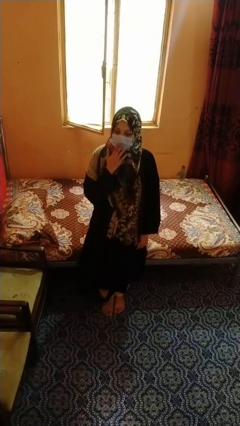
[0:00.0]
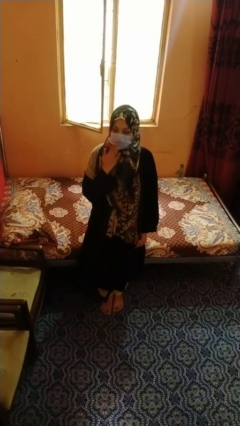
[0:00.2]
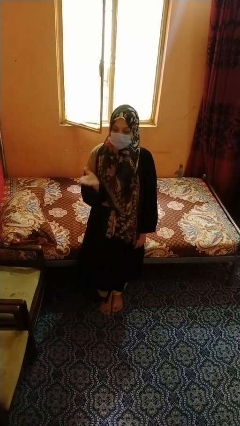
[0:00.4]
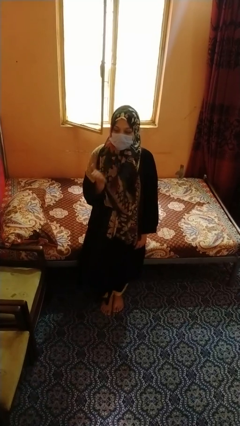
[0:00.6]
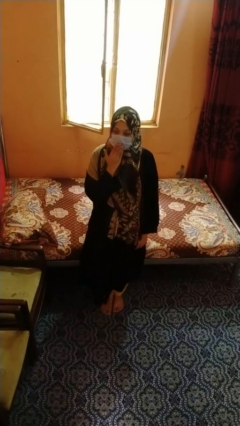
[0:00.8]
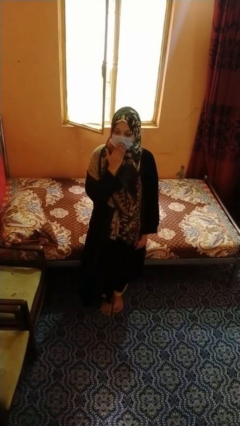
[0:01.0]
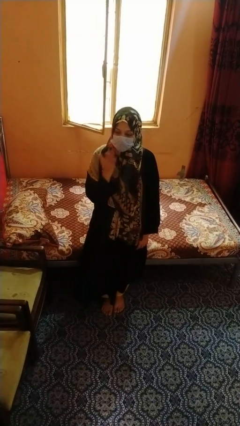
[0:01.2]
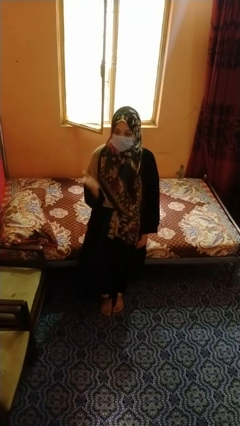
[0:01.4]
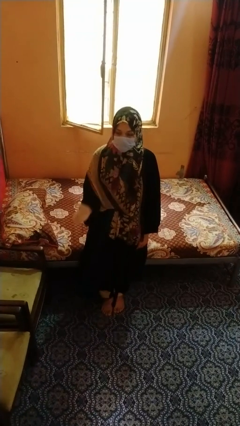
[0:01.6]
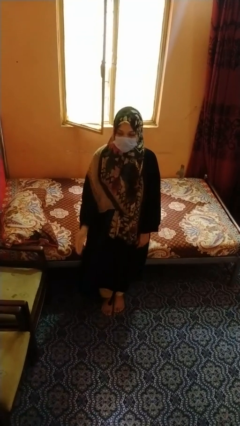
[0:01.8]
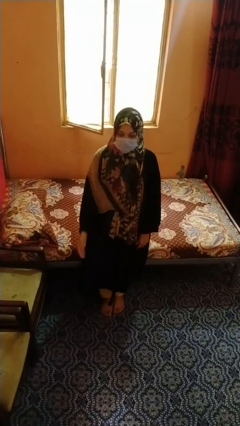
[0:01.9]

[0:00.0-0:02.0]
person gestures blow kiss

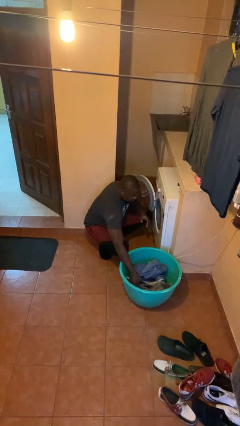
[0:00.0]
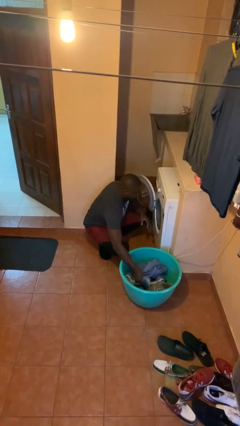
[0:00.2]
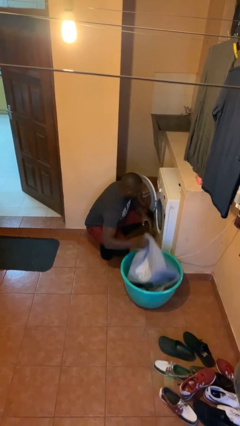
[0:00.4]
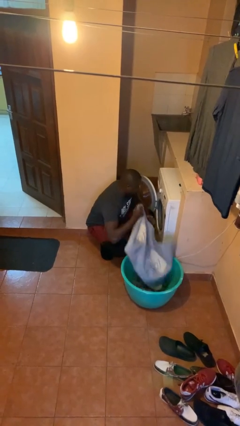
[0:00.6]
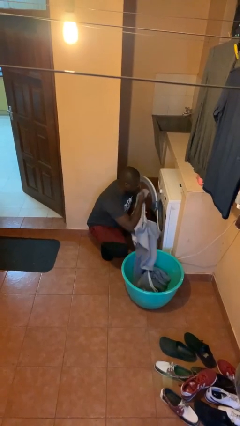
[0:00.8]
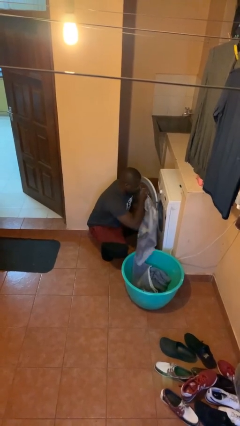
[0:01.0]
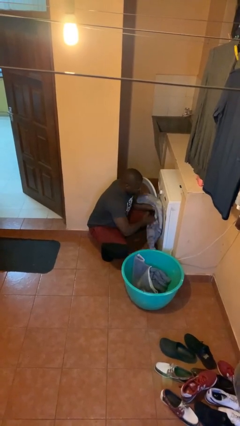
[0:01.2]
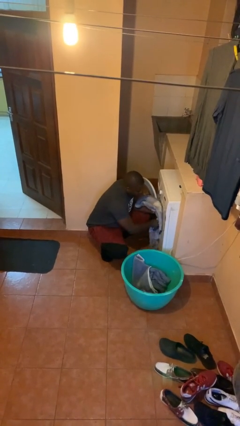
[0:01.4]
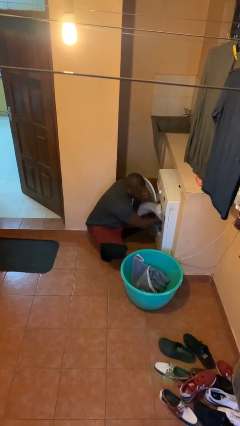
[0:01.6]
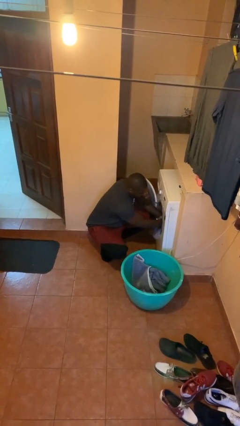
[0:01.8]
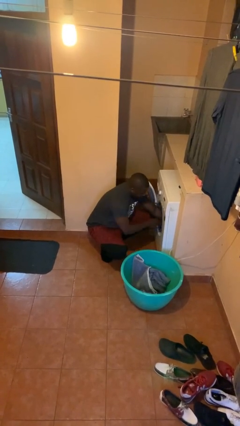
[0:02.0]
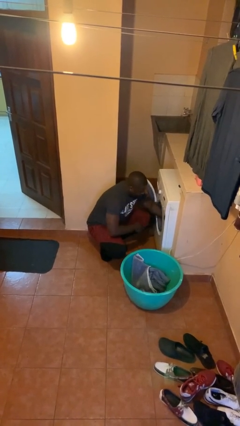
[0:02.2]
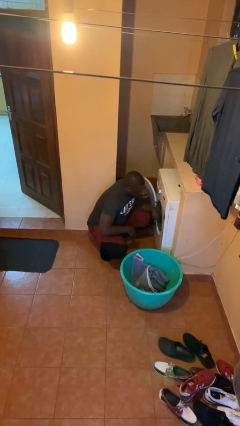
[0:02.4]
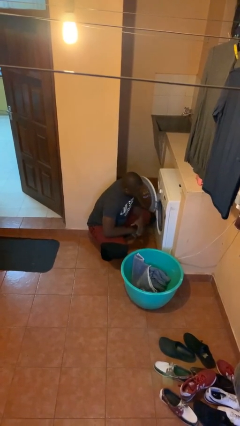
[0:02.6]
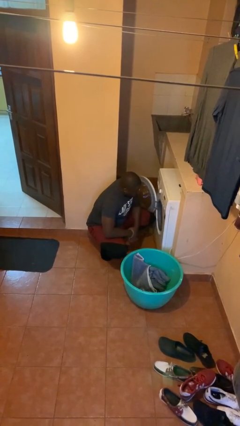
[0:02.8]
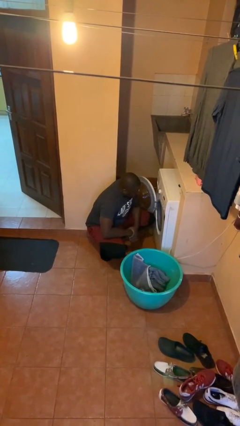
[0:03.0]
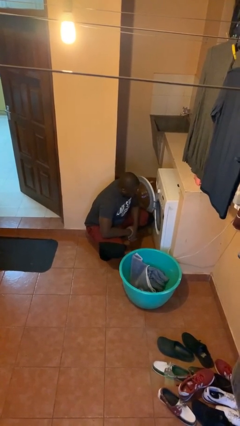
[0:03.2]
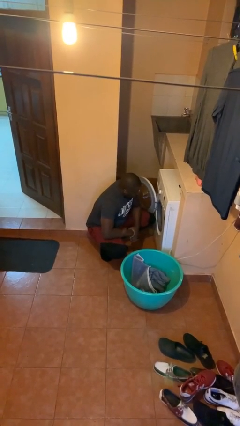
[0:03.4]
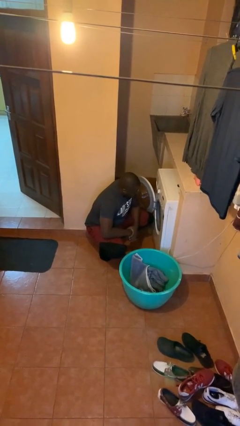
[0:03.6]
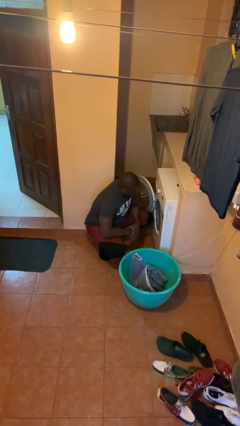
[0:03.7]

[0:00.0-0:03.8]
person loads dryer

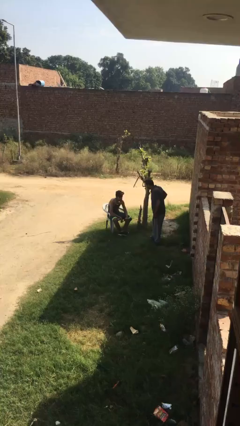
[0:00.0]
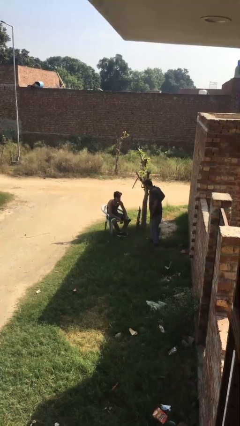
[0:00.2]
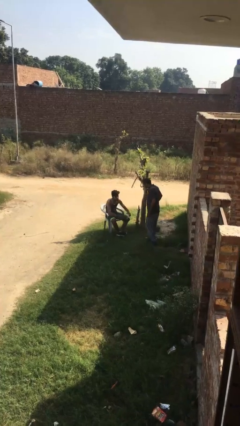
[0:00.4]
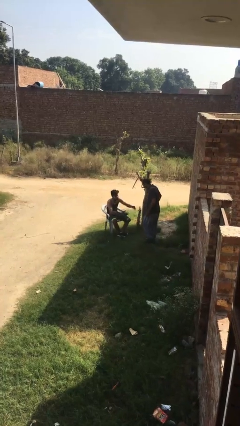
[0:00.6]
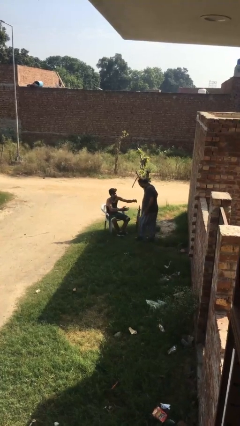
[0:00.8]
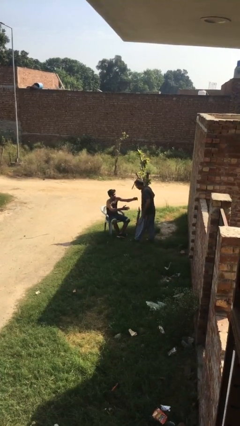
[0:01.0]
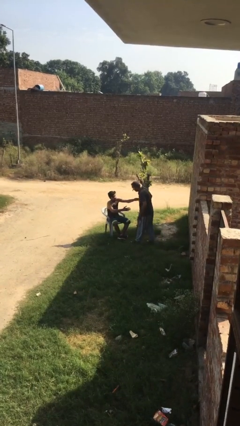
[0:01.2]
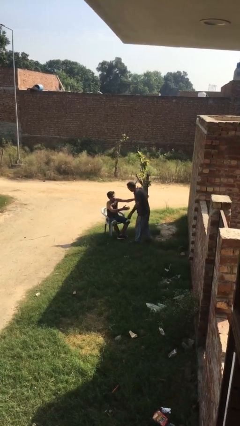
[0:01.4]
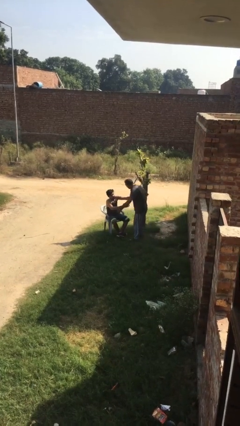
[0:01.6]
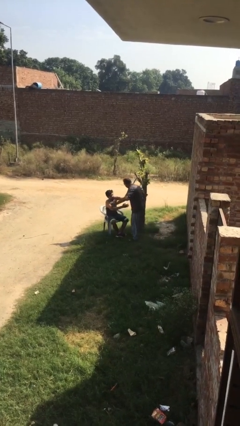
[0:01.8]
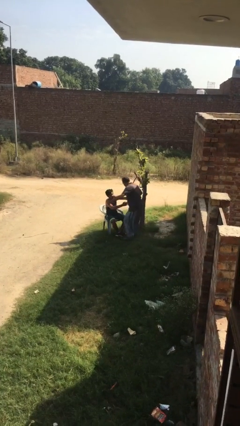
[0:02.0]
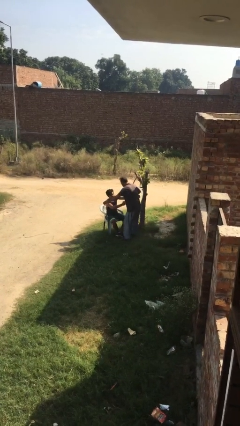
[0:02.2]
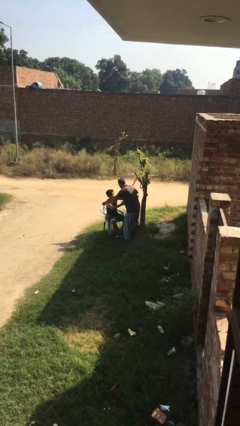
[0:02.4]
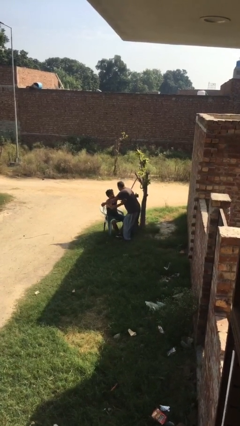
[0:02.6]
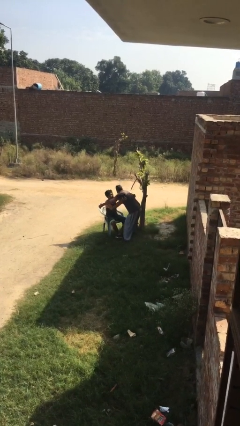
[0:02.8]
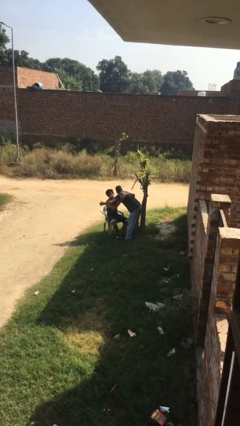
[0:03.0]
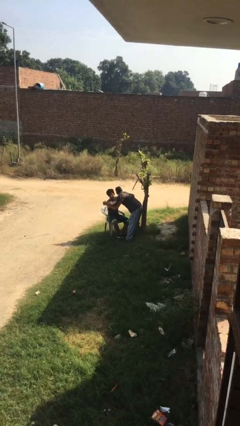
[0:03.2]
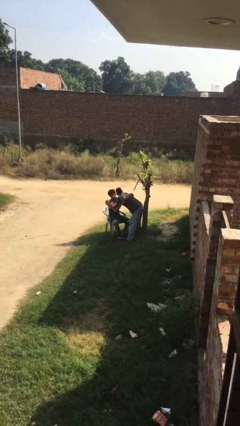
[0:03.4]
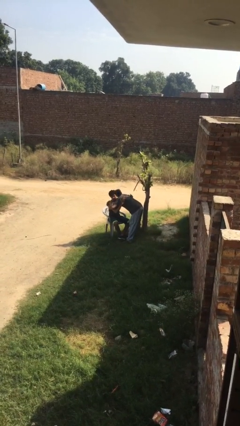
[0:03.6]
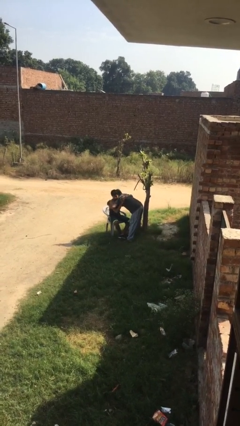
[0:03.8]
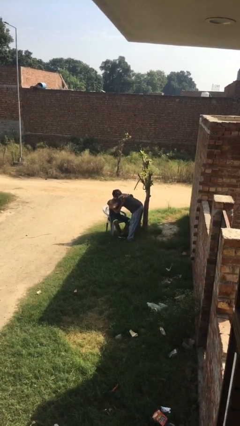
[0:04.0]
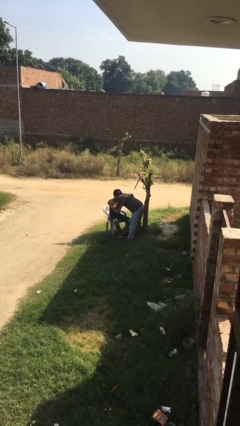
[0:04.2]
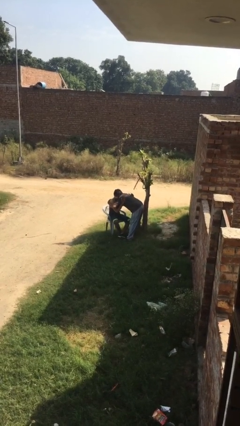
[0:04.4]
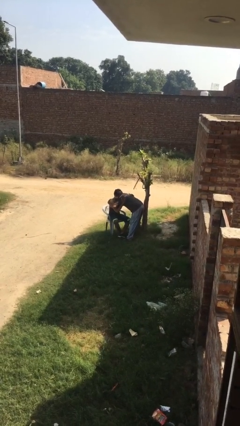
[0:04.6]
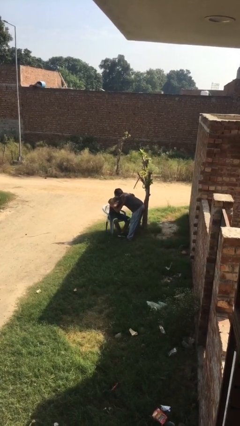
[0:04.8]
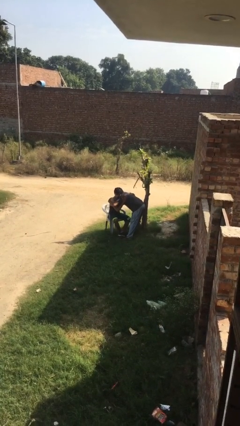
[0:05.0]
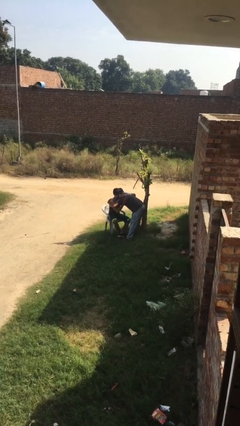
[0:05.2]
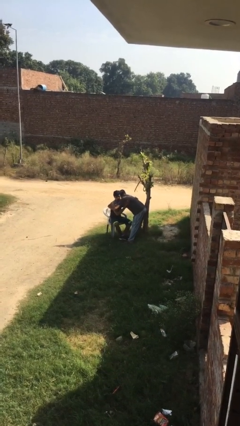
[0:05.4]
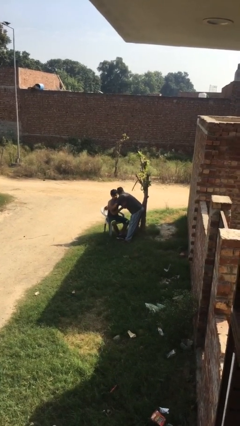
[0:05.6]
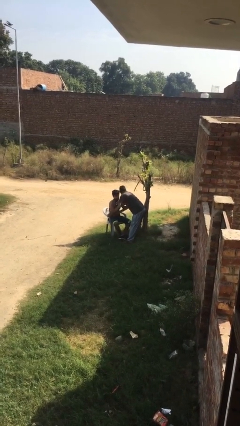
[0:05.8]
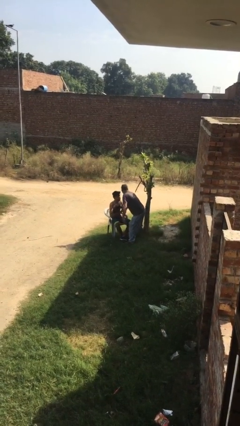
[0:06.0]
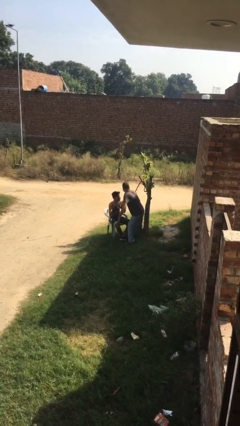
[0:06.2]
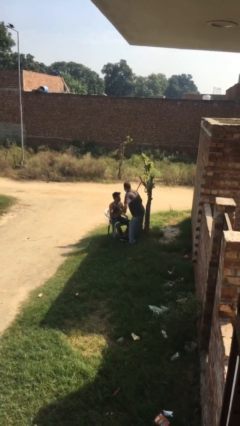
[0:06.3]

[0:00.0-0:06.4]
person embraces person

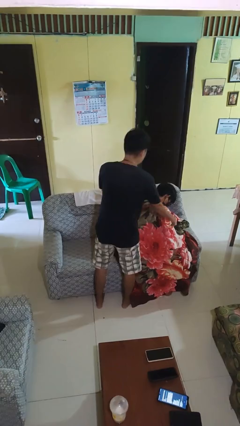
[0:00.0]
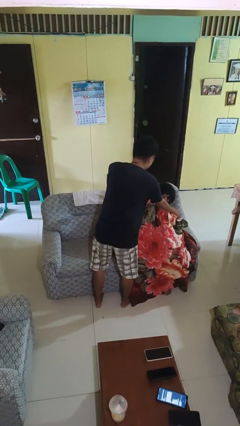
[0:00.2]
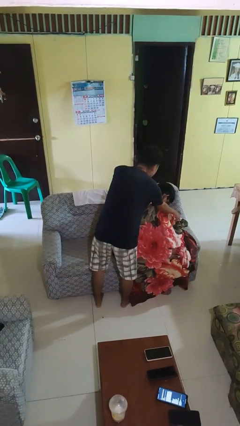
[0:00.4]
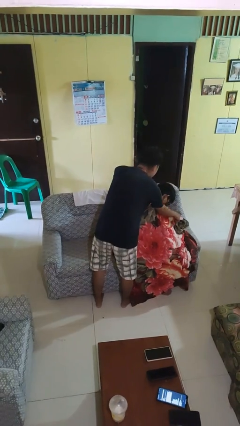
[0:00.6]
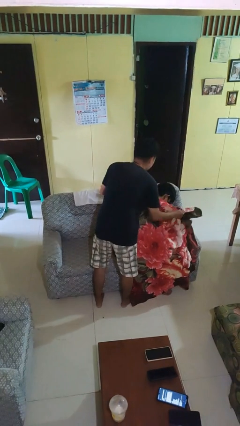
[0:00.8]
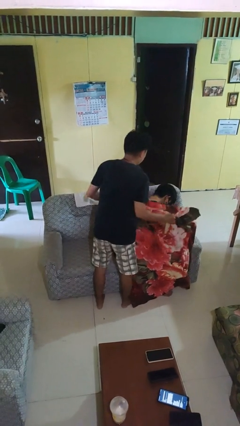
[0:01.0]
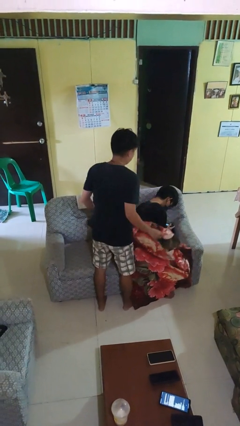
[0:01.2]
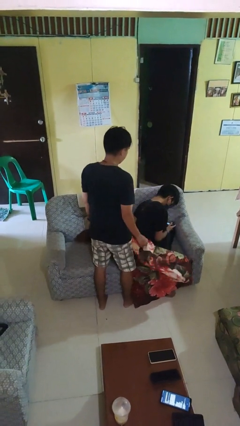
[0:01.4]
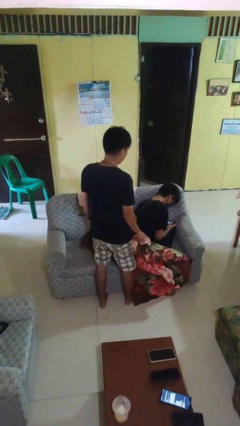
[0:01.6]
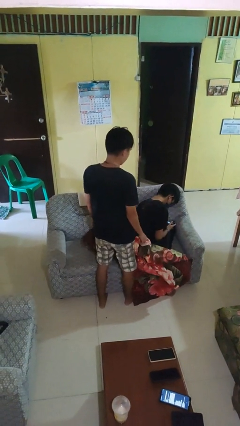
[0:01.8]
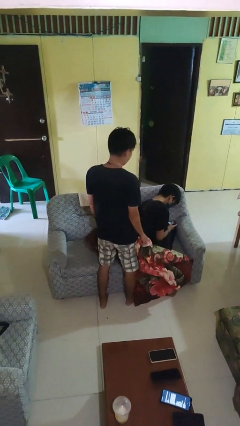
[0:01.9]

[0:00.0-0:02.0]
person uncovers friend with blanket

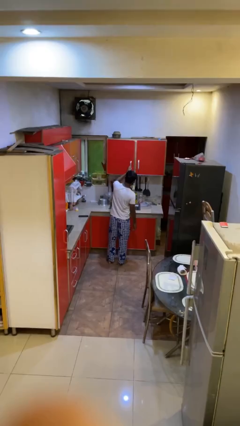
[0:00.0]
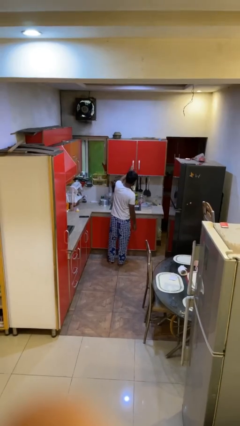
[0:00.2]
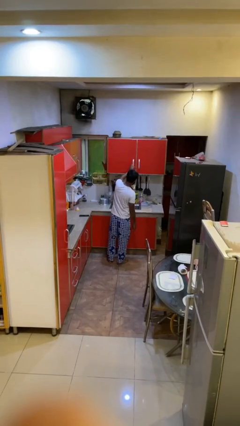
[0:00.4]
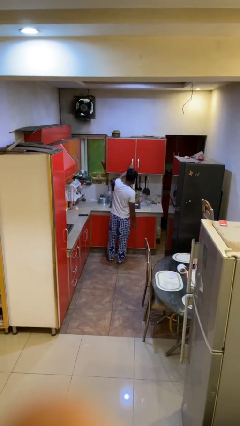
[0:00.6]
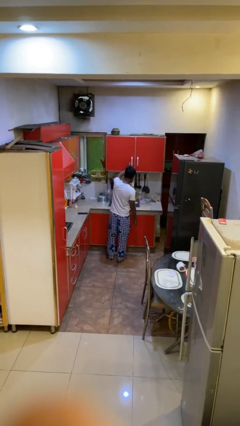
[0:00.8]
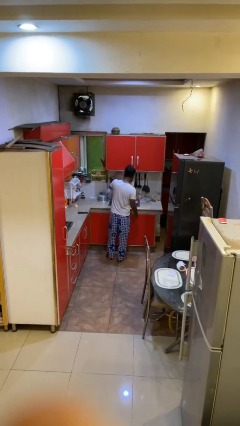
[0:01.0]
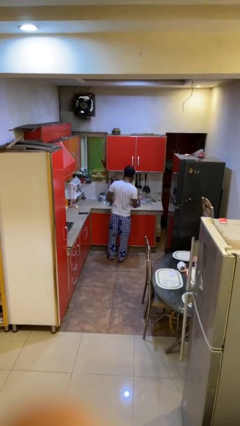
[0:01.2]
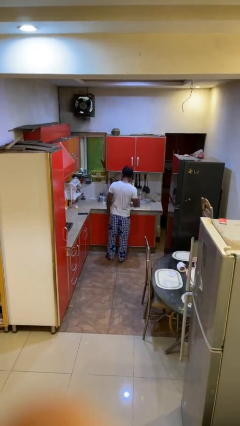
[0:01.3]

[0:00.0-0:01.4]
person closes cabinet

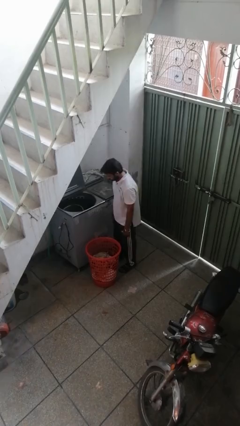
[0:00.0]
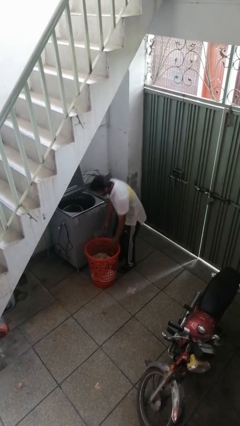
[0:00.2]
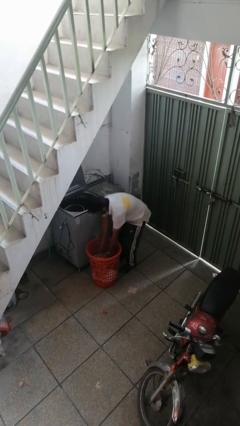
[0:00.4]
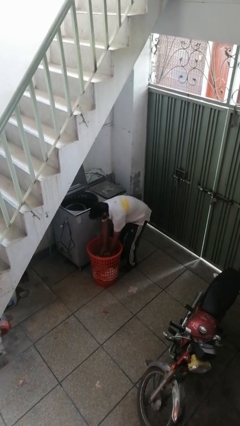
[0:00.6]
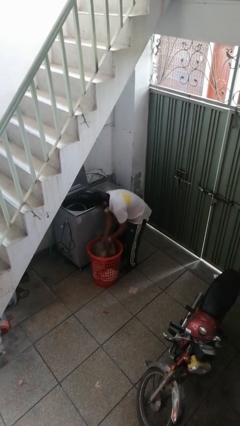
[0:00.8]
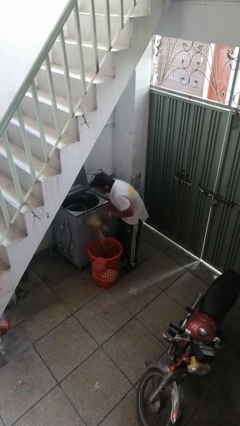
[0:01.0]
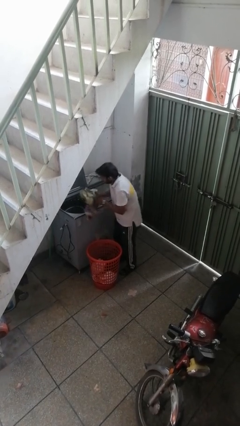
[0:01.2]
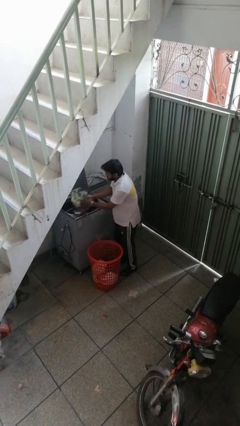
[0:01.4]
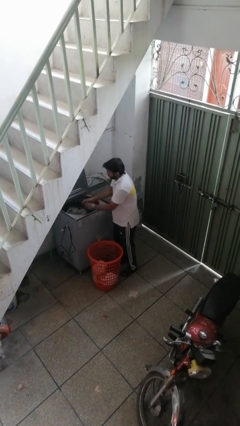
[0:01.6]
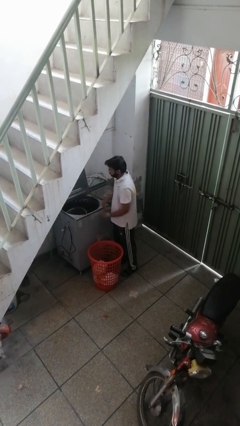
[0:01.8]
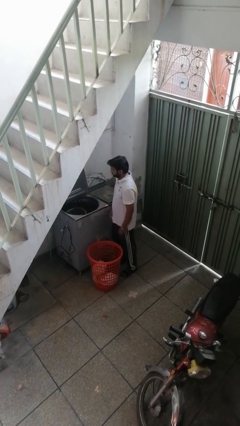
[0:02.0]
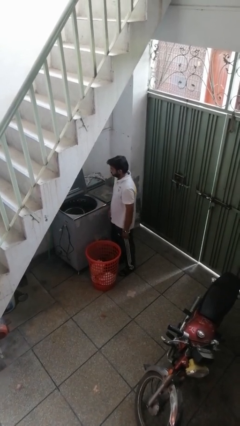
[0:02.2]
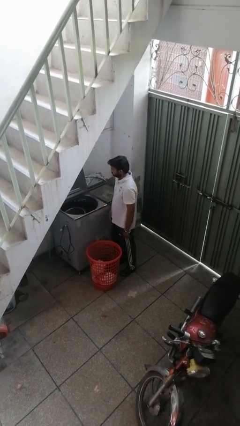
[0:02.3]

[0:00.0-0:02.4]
person loads clotheswasher
